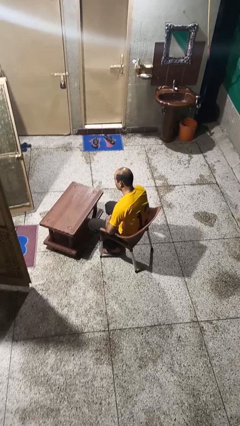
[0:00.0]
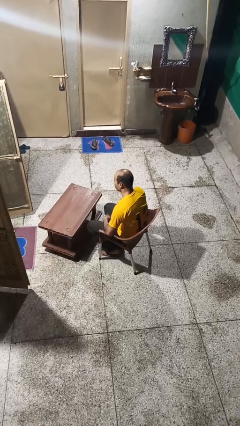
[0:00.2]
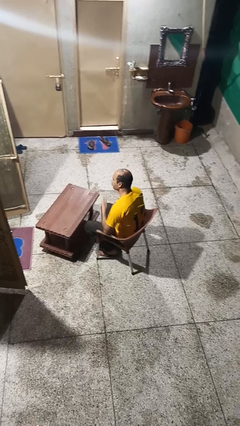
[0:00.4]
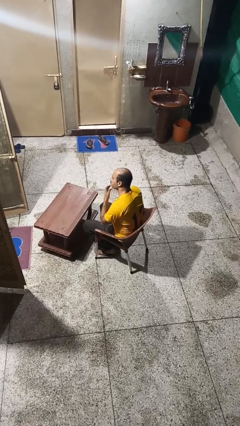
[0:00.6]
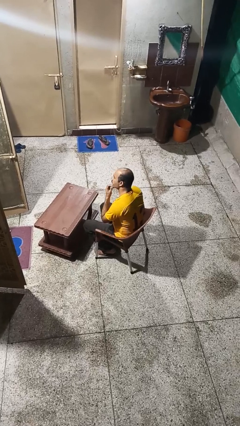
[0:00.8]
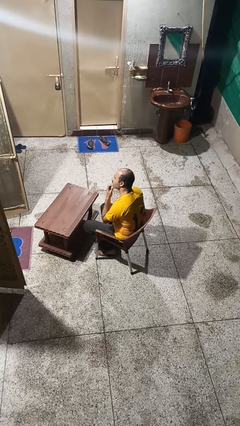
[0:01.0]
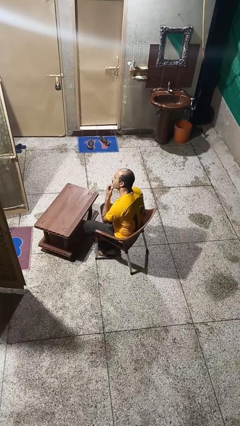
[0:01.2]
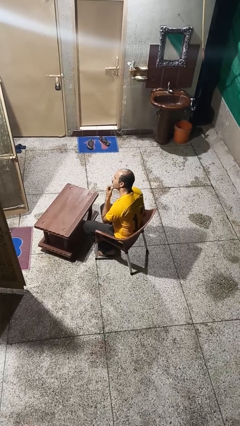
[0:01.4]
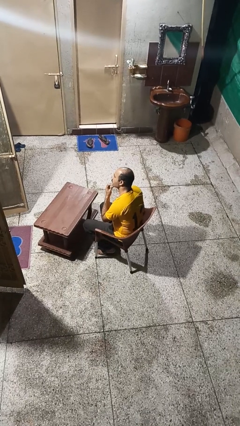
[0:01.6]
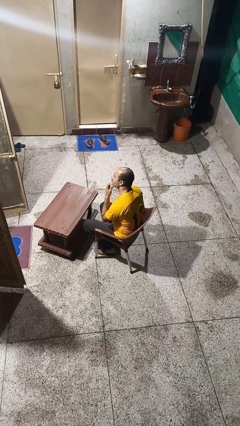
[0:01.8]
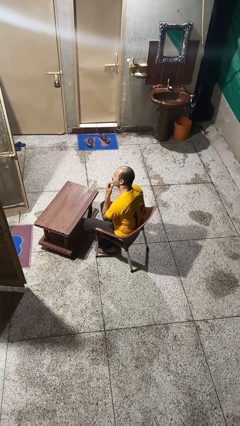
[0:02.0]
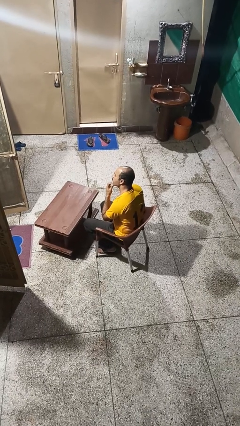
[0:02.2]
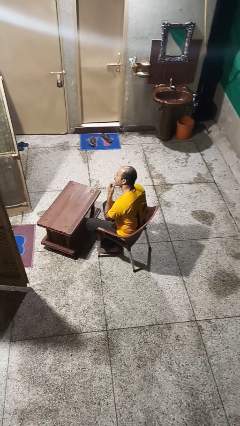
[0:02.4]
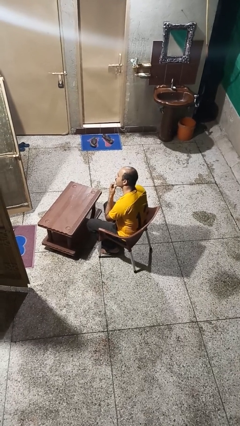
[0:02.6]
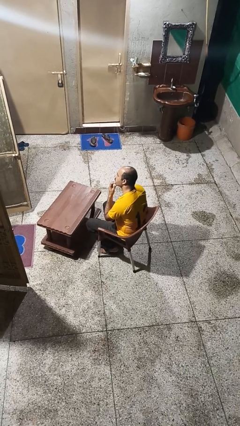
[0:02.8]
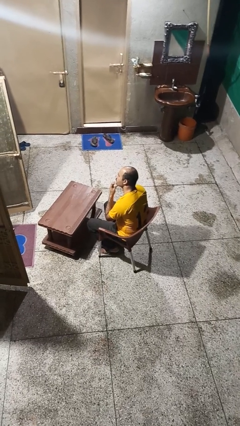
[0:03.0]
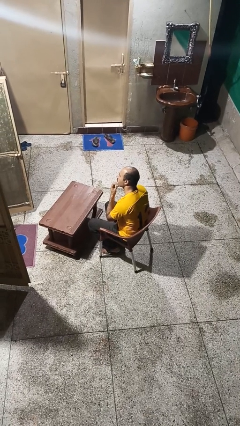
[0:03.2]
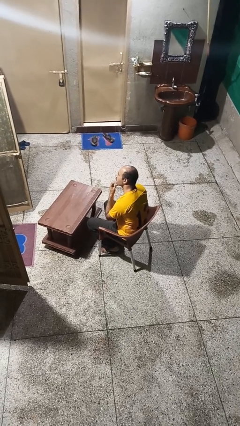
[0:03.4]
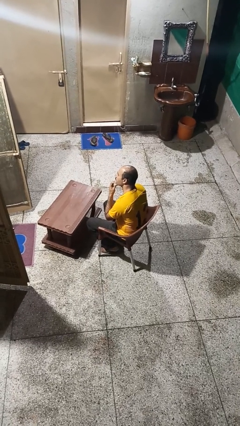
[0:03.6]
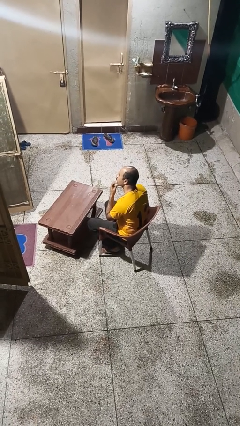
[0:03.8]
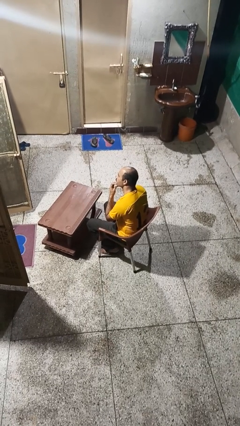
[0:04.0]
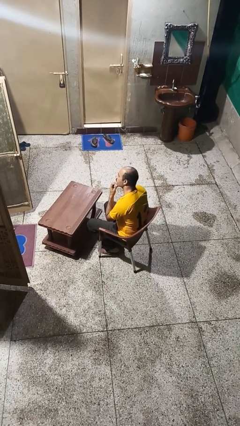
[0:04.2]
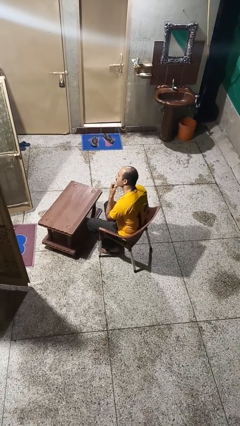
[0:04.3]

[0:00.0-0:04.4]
person strokes chin

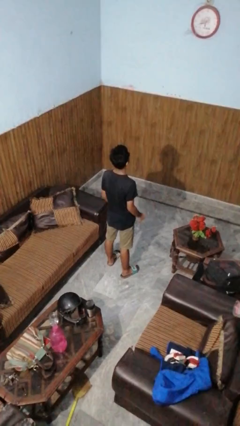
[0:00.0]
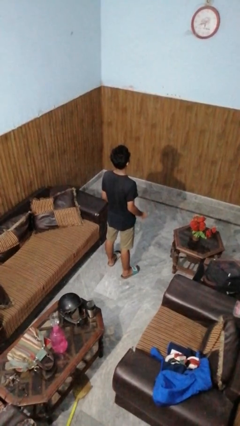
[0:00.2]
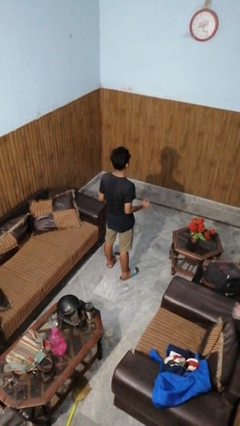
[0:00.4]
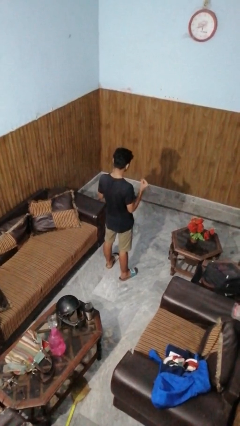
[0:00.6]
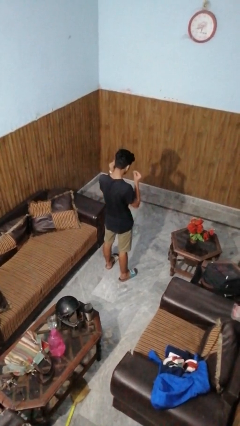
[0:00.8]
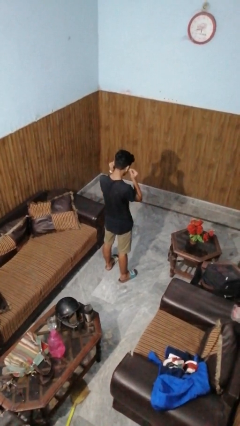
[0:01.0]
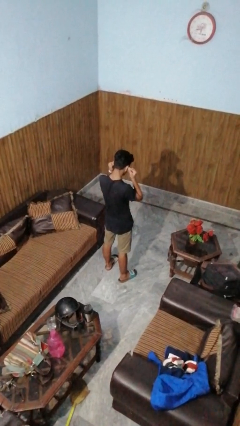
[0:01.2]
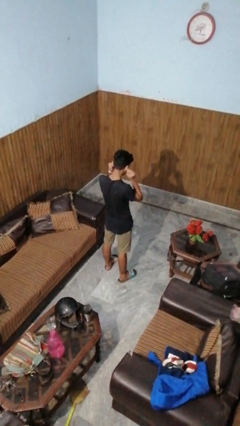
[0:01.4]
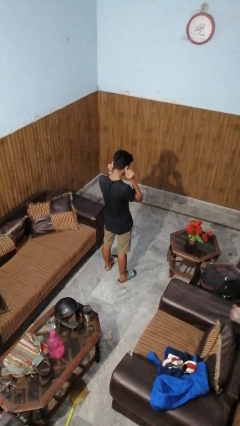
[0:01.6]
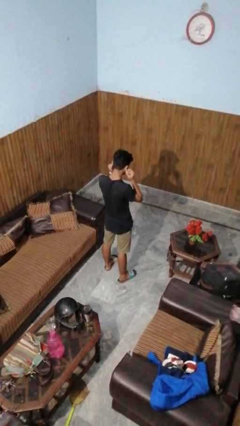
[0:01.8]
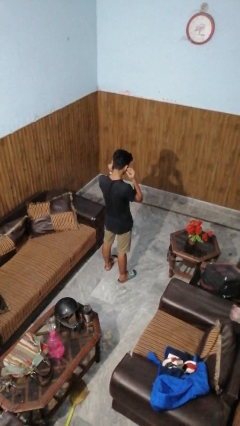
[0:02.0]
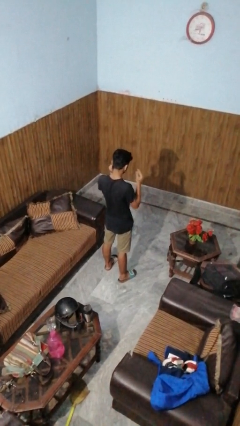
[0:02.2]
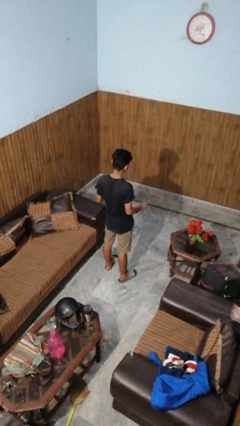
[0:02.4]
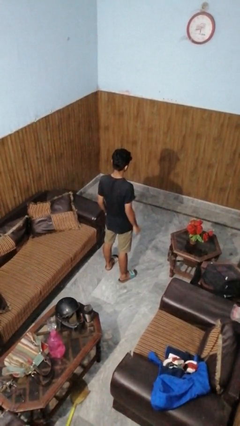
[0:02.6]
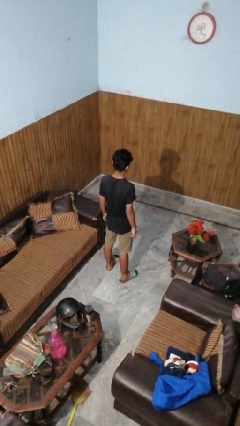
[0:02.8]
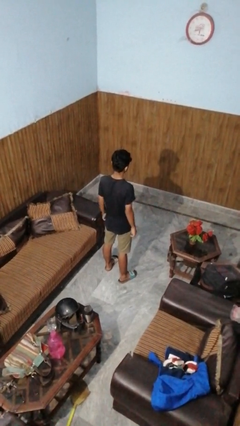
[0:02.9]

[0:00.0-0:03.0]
person puts on headphones

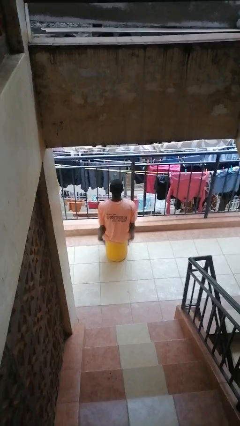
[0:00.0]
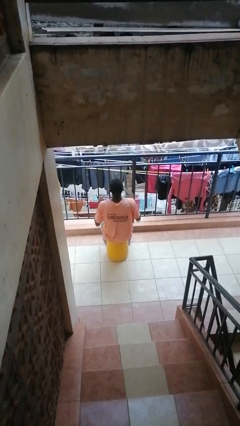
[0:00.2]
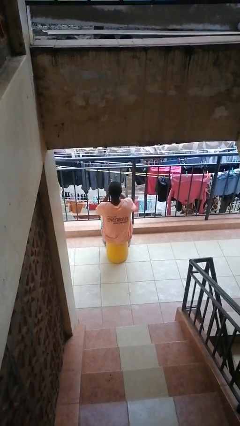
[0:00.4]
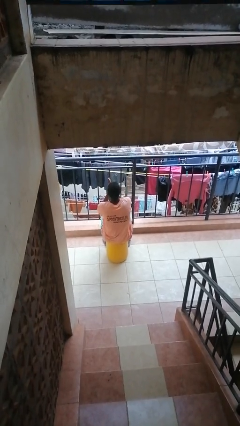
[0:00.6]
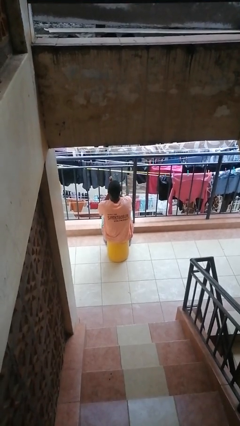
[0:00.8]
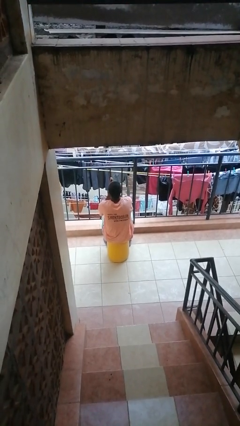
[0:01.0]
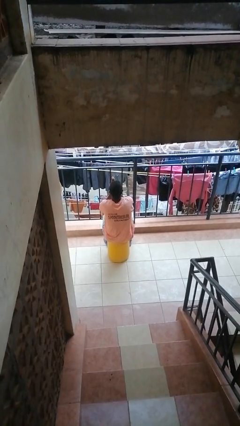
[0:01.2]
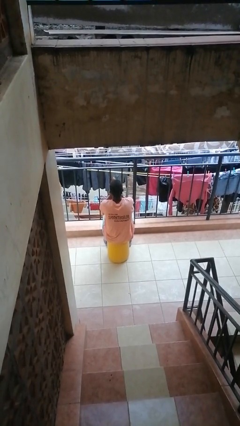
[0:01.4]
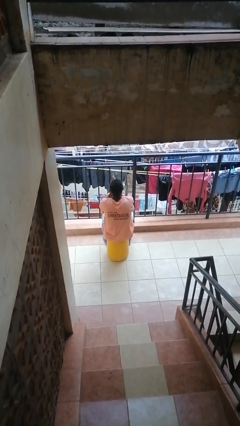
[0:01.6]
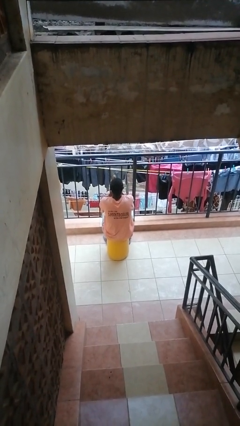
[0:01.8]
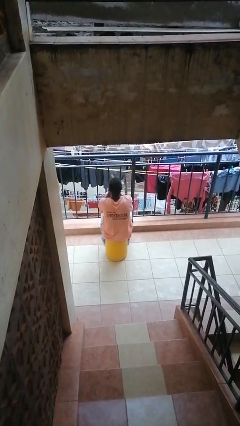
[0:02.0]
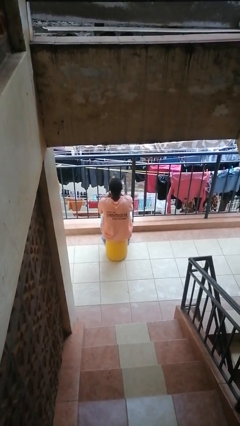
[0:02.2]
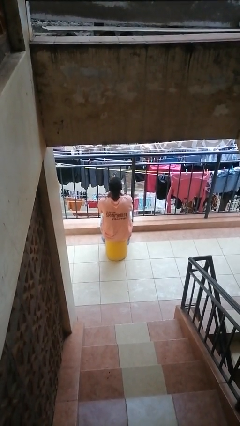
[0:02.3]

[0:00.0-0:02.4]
person blows into hands

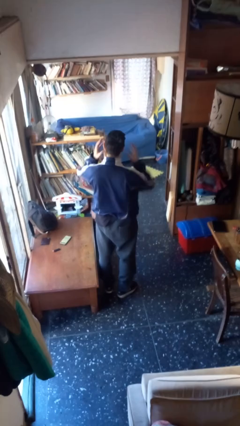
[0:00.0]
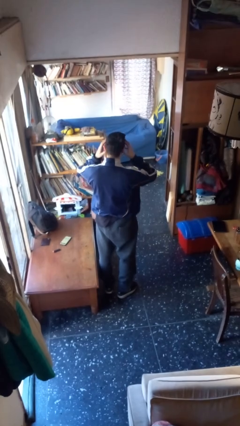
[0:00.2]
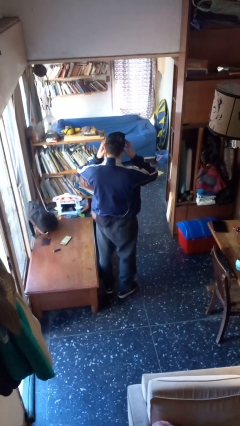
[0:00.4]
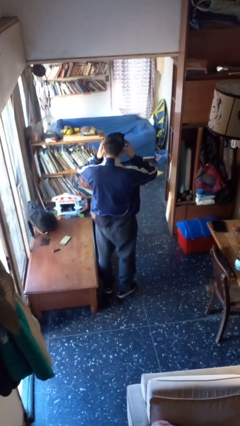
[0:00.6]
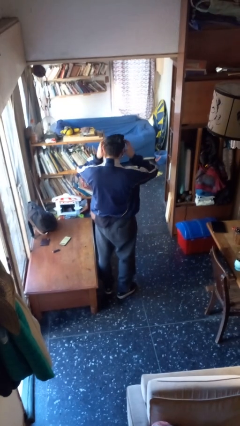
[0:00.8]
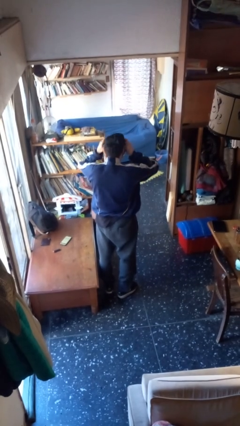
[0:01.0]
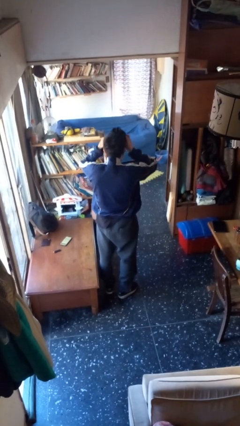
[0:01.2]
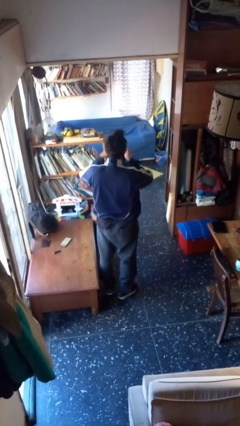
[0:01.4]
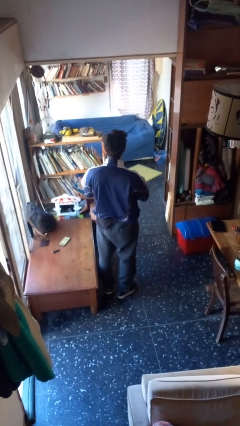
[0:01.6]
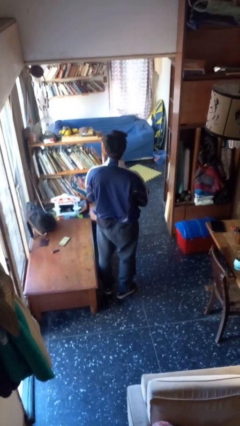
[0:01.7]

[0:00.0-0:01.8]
person takes off facemask

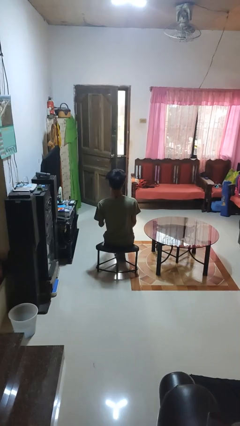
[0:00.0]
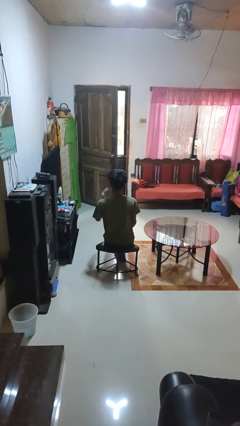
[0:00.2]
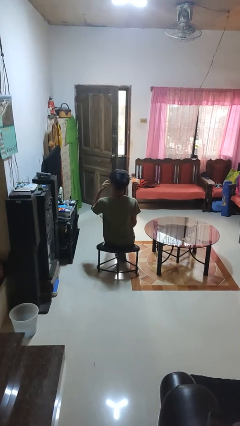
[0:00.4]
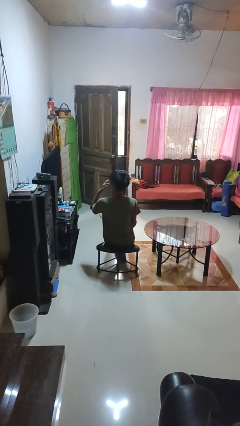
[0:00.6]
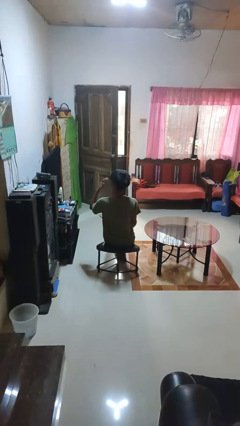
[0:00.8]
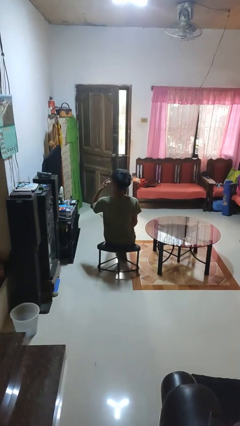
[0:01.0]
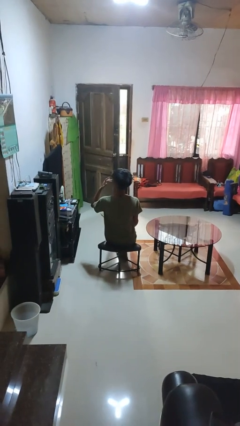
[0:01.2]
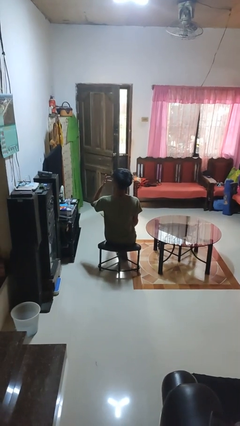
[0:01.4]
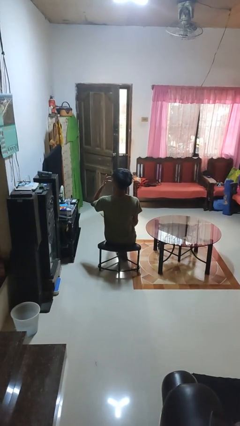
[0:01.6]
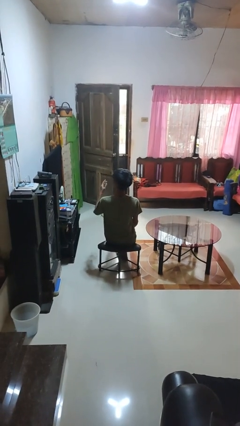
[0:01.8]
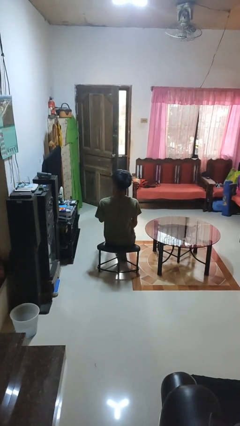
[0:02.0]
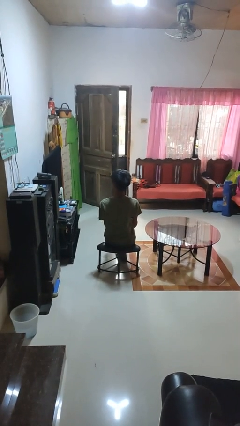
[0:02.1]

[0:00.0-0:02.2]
person licks fingers

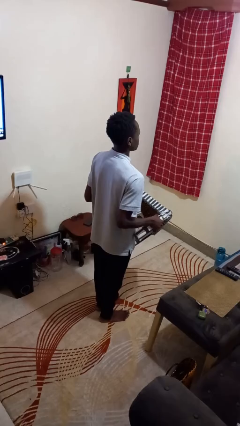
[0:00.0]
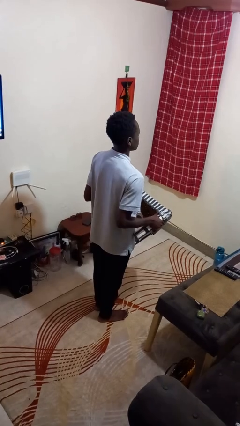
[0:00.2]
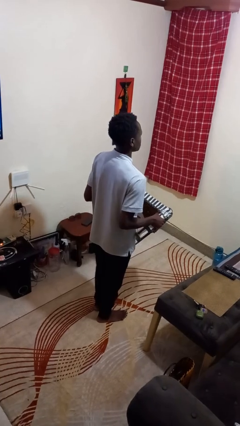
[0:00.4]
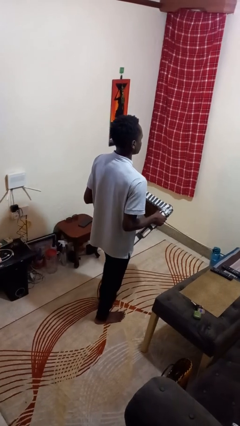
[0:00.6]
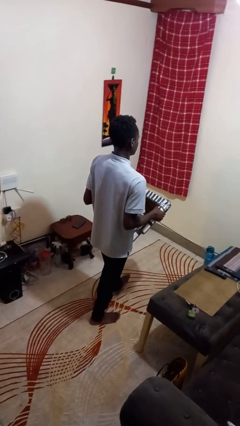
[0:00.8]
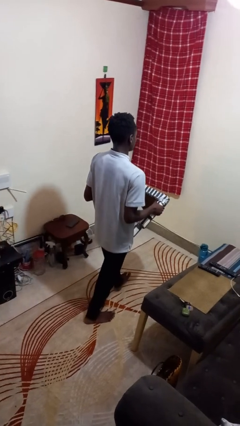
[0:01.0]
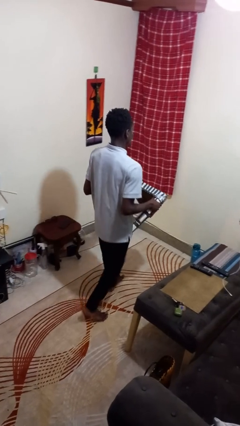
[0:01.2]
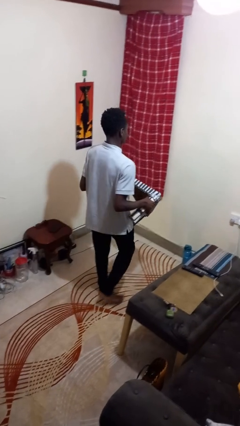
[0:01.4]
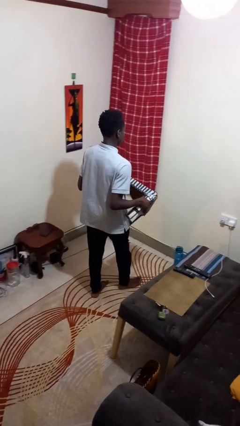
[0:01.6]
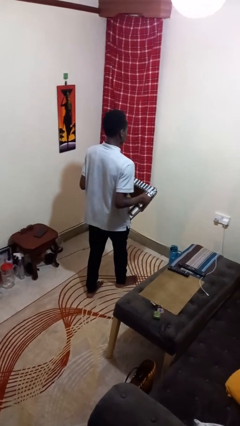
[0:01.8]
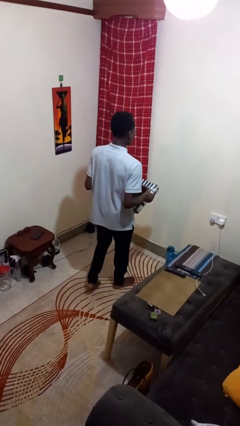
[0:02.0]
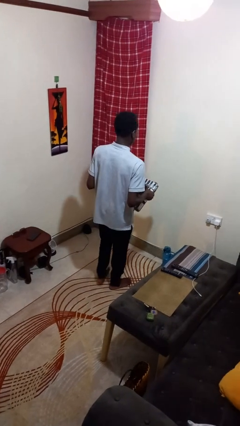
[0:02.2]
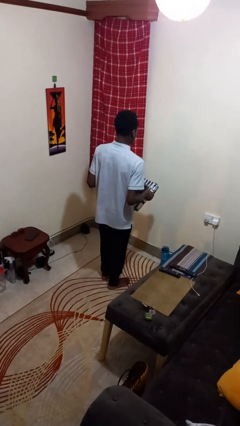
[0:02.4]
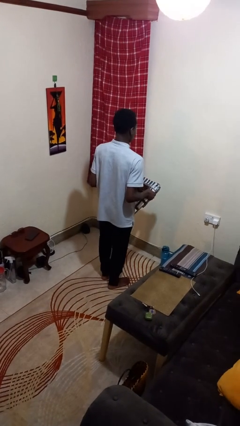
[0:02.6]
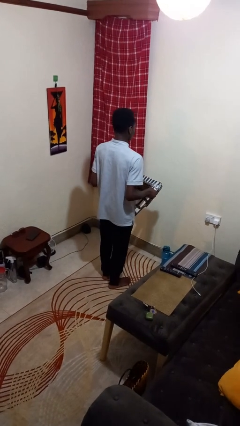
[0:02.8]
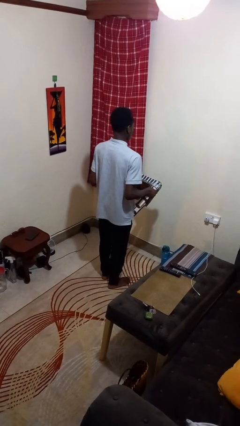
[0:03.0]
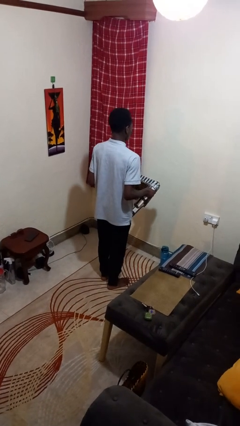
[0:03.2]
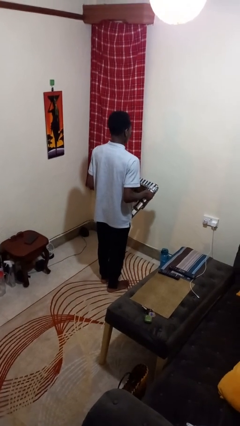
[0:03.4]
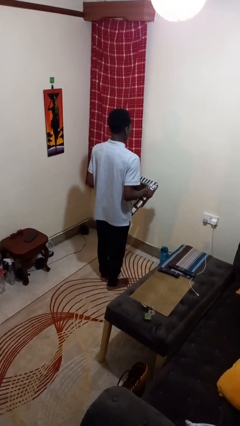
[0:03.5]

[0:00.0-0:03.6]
person carries furniture

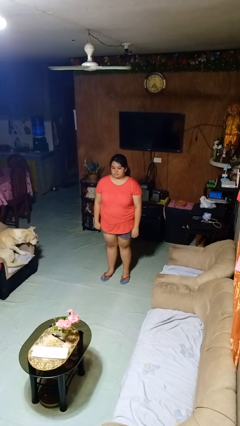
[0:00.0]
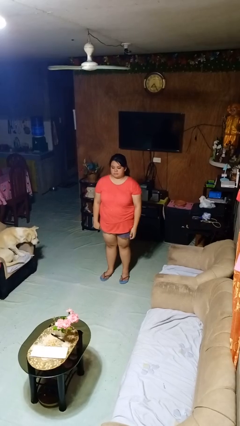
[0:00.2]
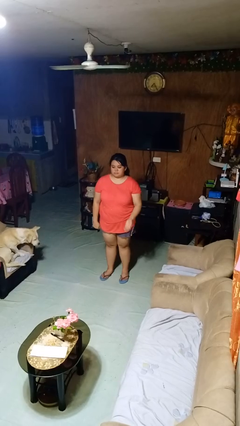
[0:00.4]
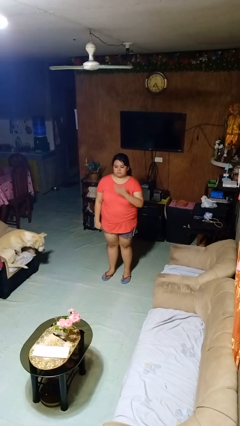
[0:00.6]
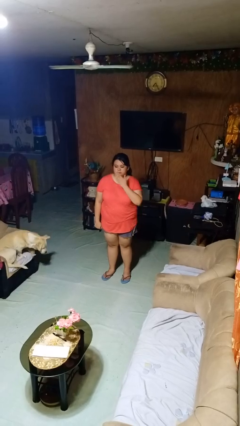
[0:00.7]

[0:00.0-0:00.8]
person gestures blow kiss
